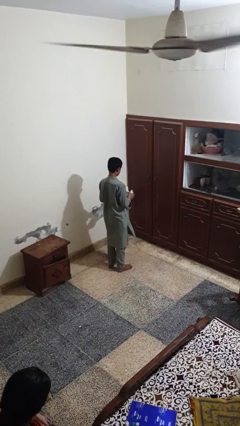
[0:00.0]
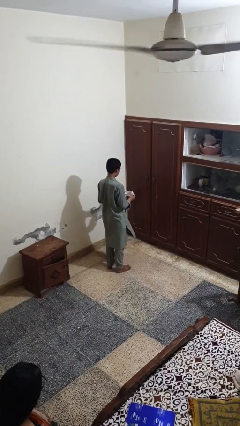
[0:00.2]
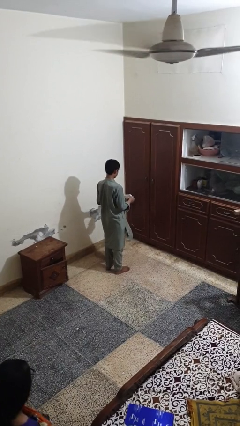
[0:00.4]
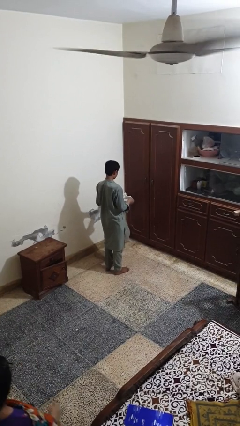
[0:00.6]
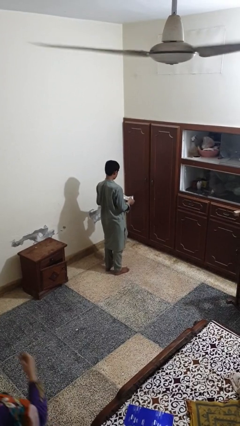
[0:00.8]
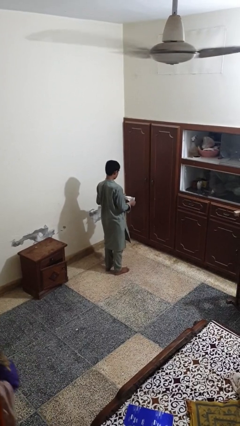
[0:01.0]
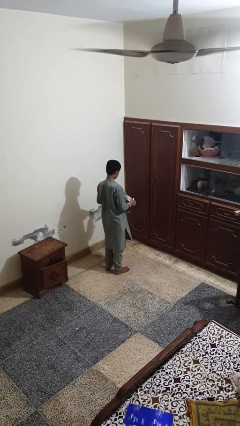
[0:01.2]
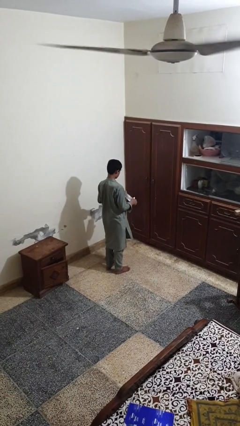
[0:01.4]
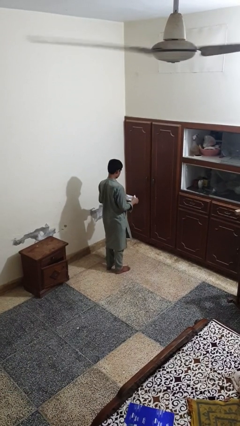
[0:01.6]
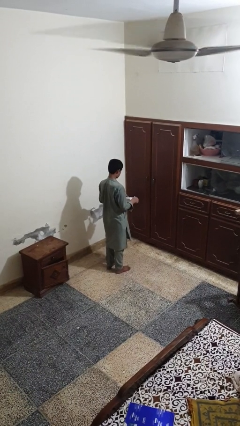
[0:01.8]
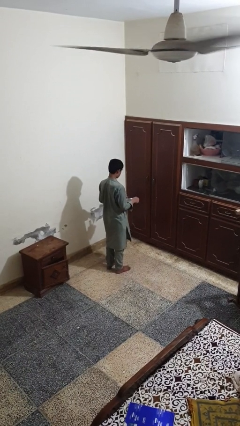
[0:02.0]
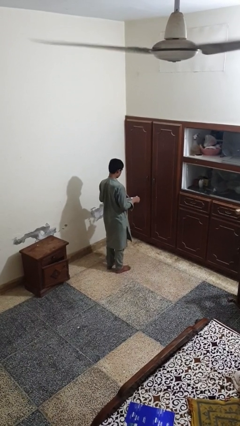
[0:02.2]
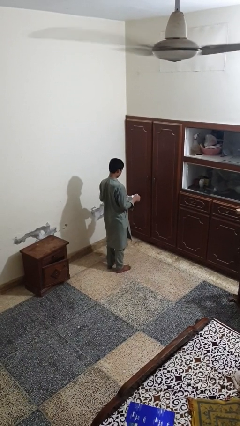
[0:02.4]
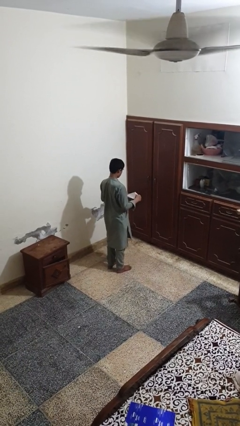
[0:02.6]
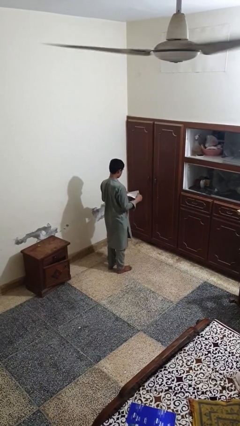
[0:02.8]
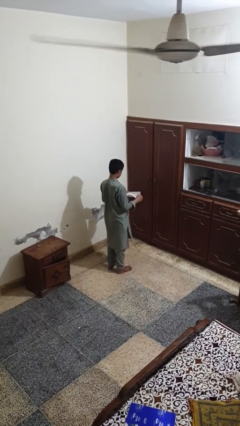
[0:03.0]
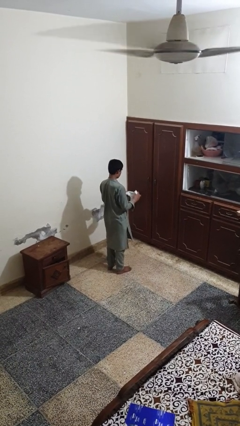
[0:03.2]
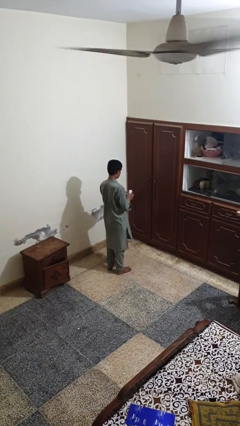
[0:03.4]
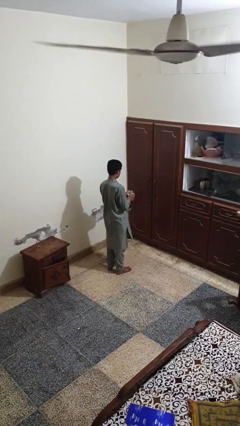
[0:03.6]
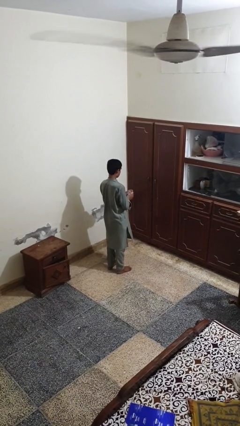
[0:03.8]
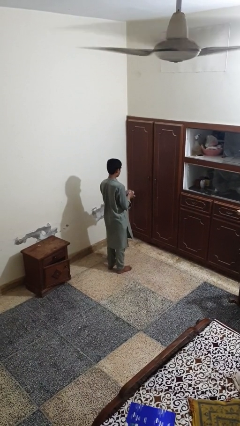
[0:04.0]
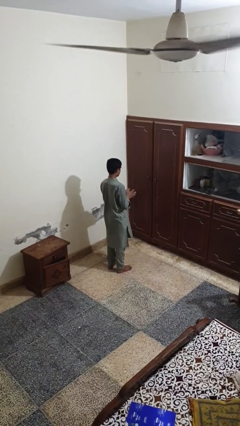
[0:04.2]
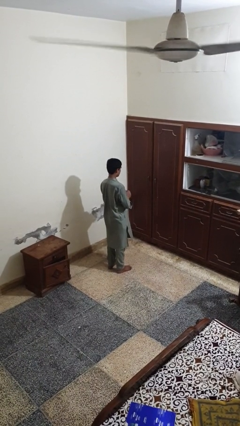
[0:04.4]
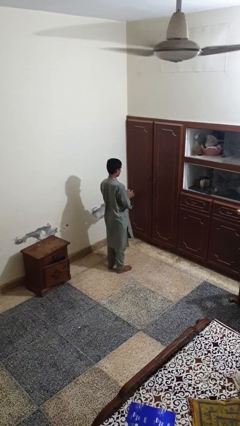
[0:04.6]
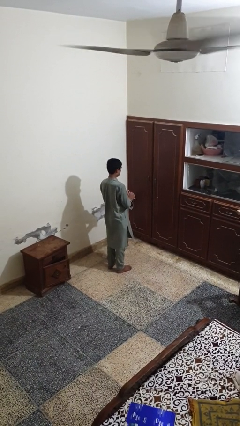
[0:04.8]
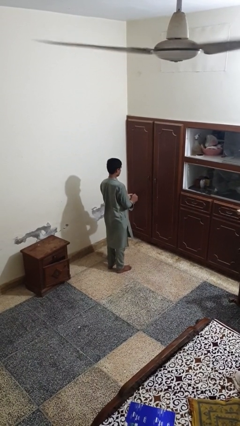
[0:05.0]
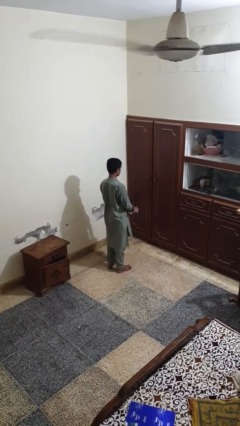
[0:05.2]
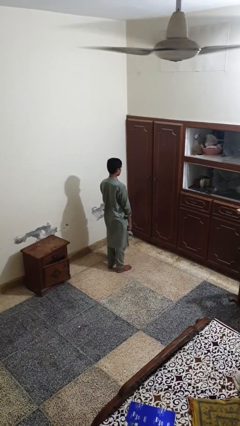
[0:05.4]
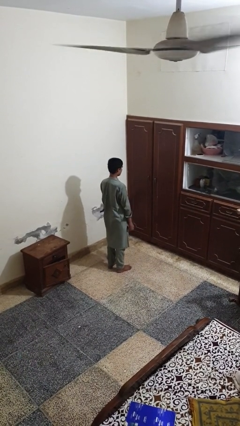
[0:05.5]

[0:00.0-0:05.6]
person crumples paper

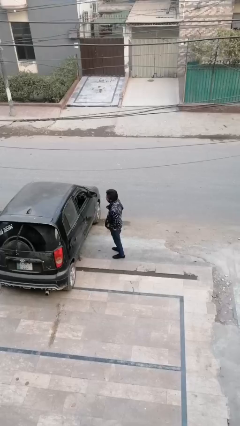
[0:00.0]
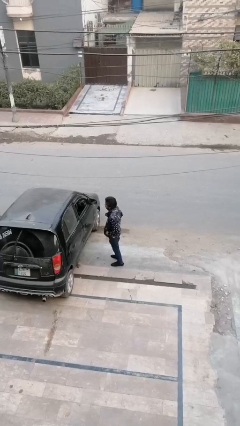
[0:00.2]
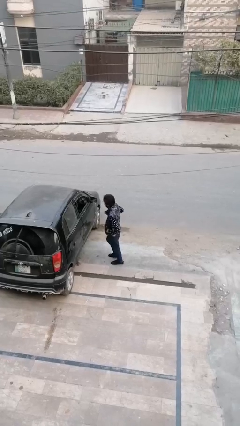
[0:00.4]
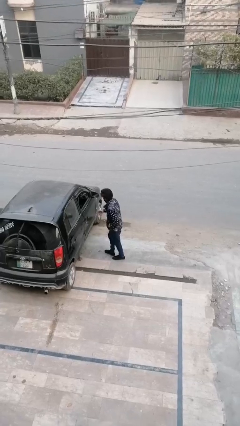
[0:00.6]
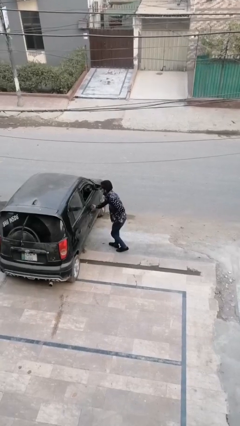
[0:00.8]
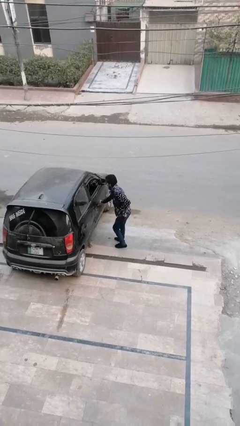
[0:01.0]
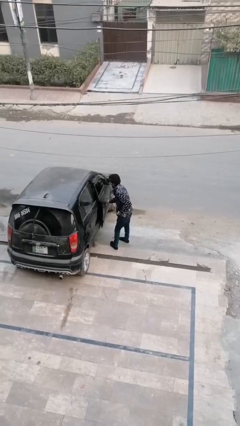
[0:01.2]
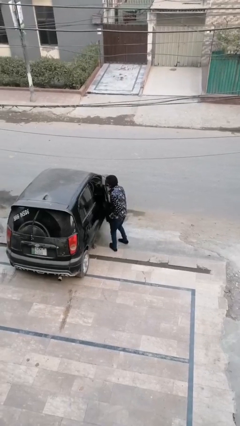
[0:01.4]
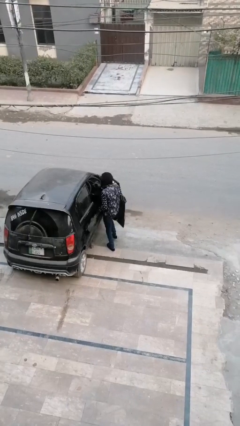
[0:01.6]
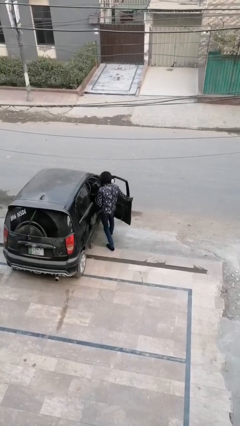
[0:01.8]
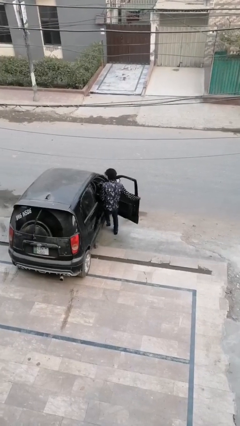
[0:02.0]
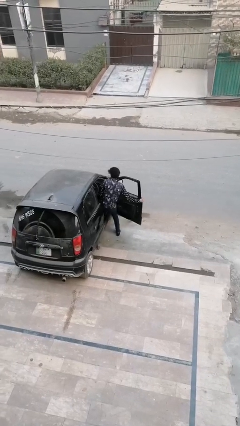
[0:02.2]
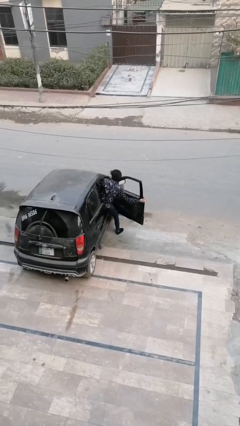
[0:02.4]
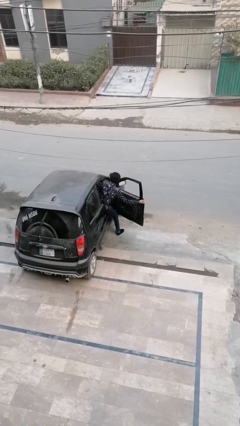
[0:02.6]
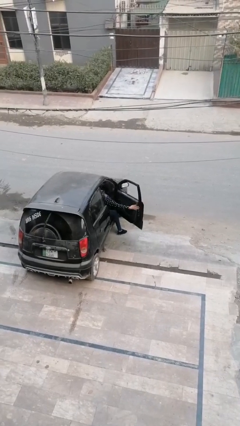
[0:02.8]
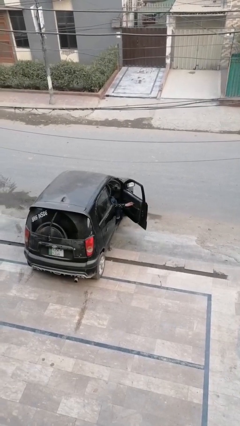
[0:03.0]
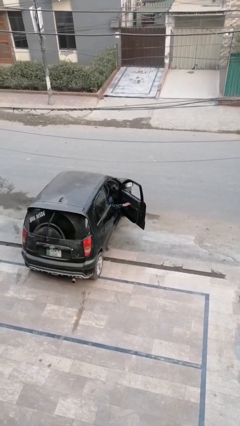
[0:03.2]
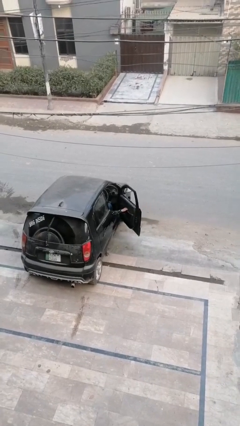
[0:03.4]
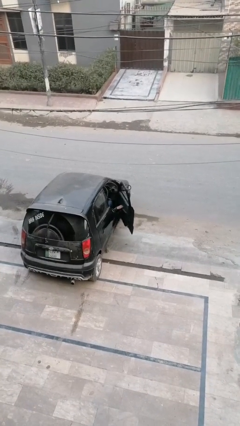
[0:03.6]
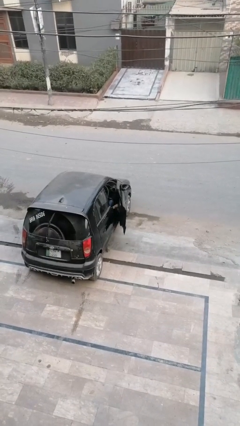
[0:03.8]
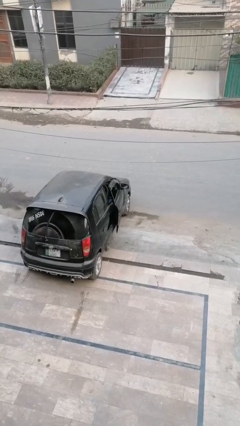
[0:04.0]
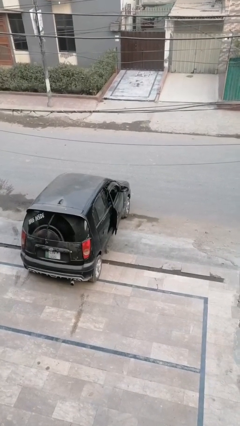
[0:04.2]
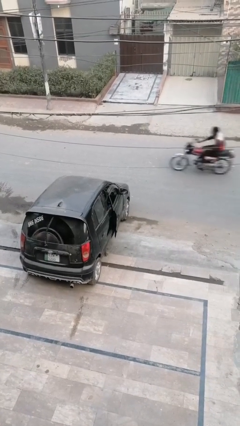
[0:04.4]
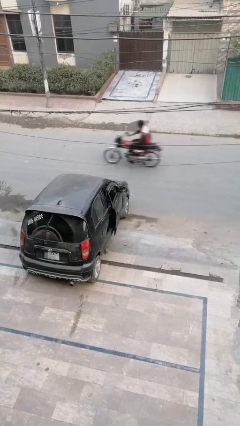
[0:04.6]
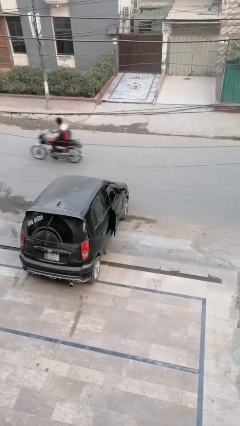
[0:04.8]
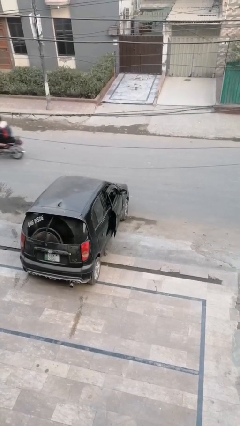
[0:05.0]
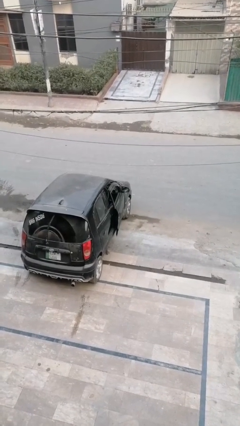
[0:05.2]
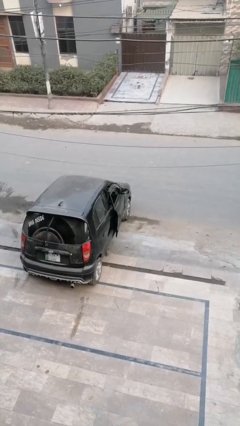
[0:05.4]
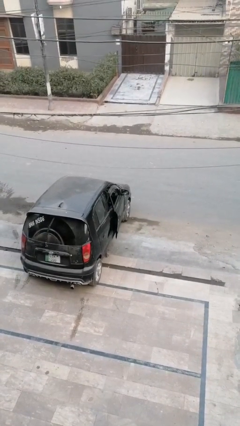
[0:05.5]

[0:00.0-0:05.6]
person enters car

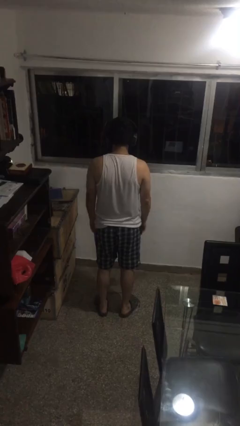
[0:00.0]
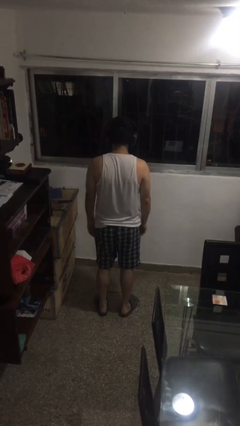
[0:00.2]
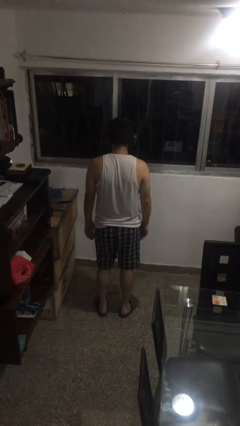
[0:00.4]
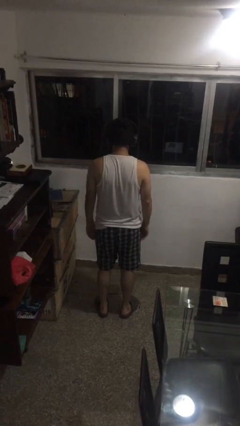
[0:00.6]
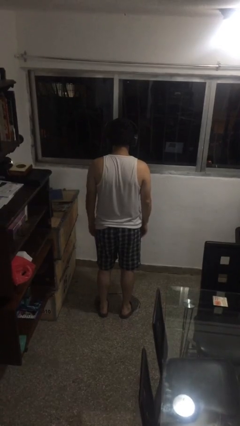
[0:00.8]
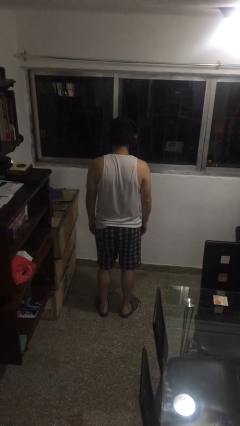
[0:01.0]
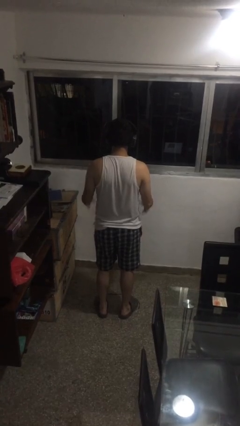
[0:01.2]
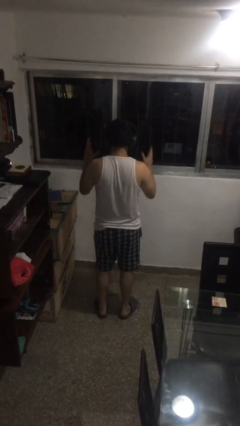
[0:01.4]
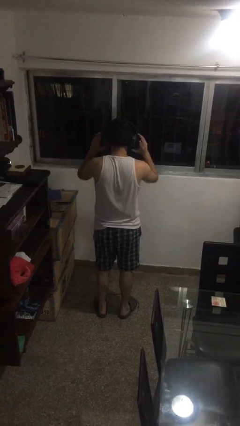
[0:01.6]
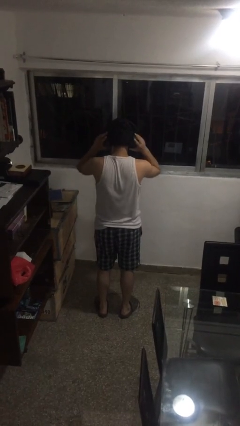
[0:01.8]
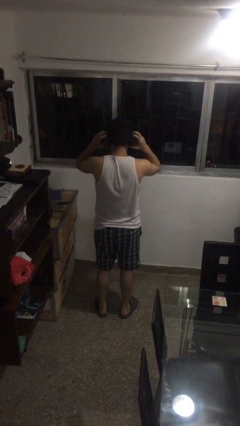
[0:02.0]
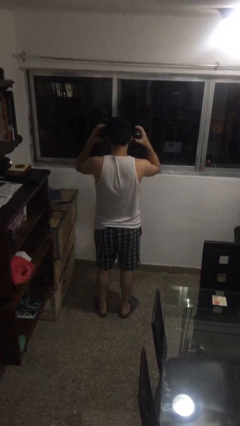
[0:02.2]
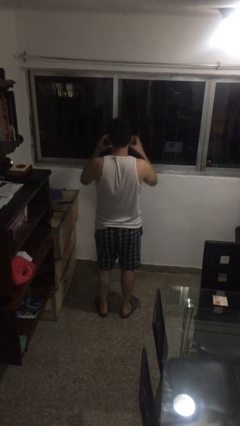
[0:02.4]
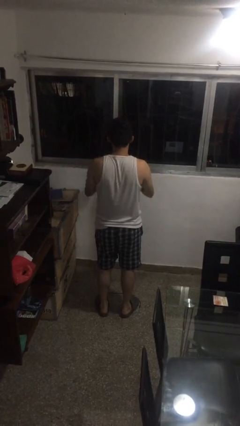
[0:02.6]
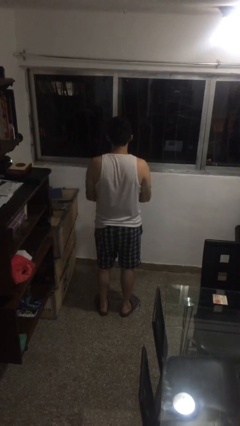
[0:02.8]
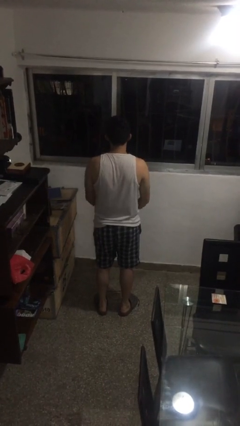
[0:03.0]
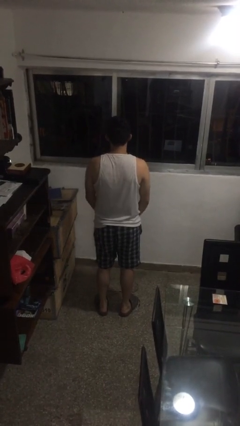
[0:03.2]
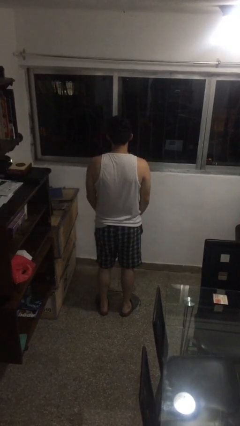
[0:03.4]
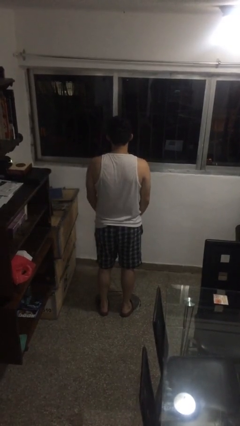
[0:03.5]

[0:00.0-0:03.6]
person takes off headphones

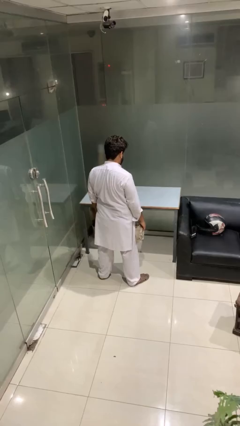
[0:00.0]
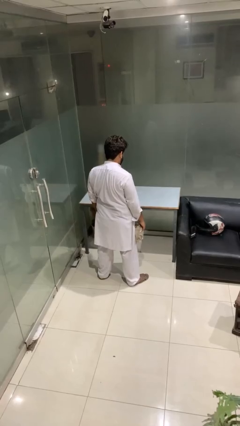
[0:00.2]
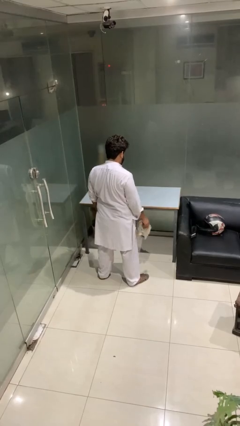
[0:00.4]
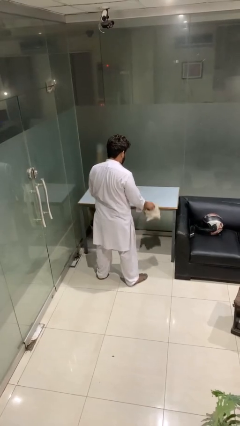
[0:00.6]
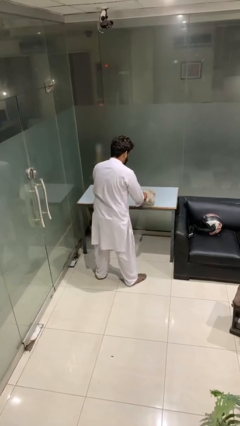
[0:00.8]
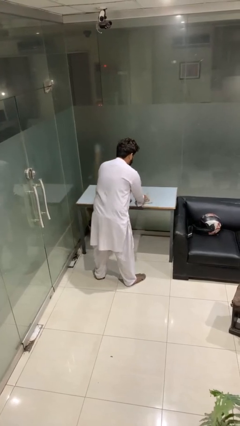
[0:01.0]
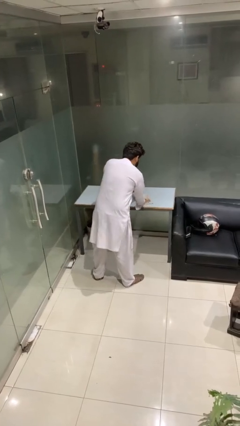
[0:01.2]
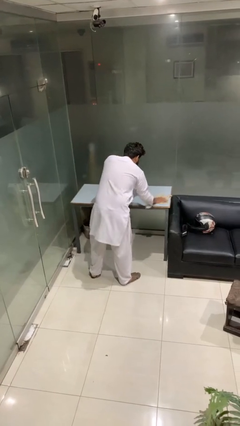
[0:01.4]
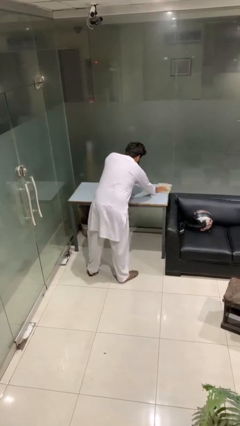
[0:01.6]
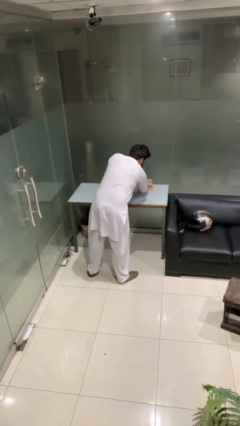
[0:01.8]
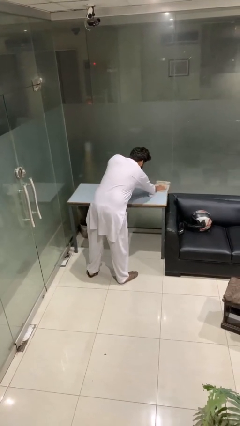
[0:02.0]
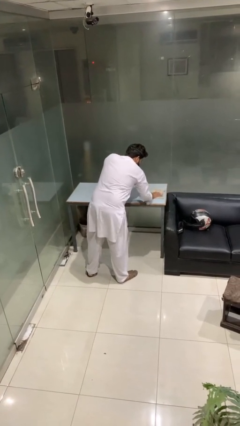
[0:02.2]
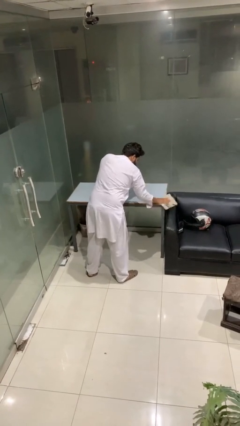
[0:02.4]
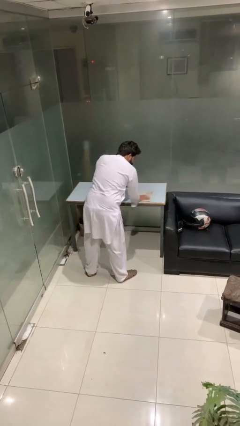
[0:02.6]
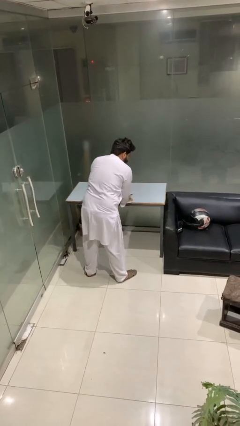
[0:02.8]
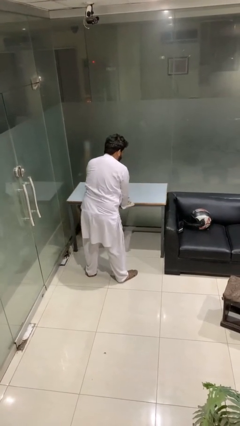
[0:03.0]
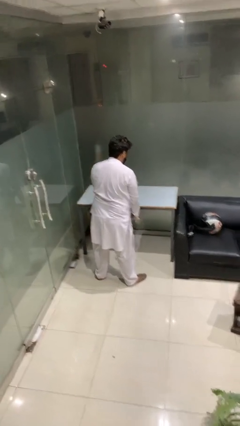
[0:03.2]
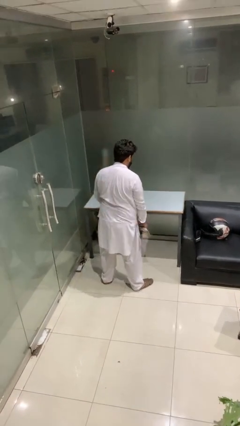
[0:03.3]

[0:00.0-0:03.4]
person cleans table with rag
